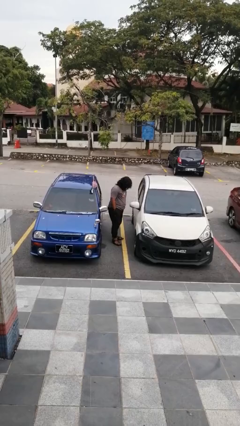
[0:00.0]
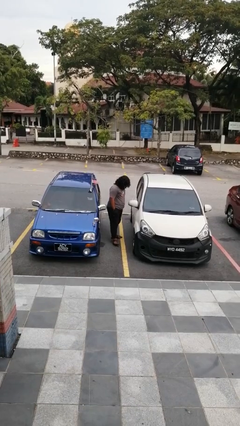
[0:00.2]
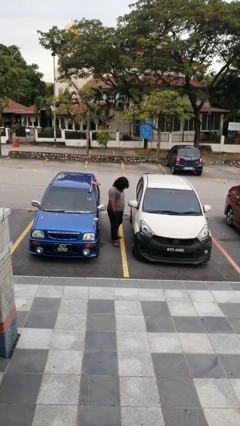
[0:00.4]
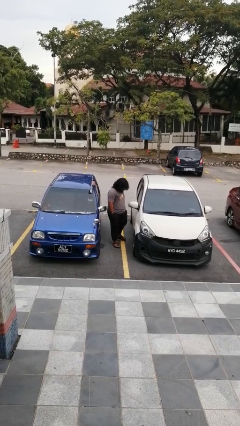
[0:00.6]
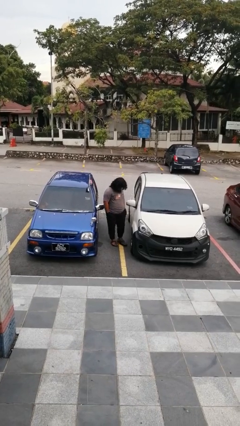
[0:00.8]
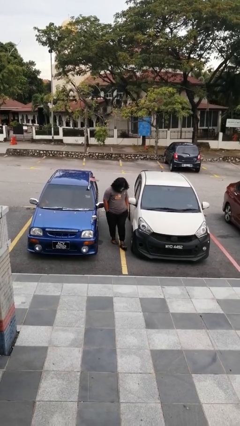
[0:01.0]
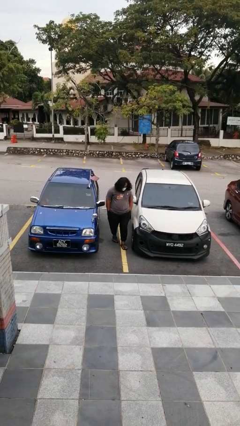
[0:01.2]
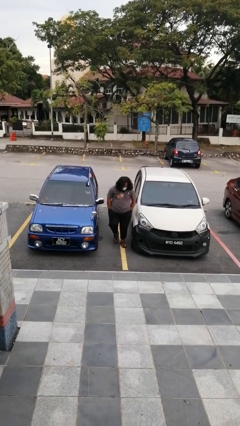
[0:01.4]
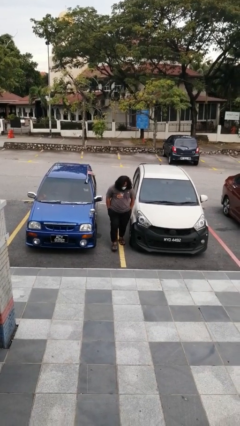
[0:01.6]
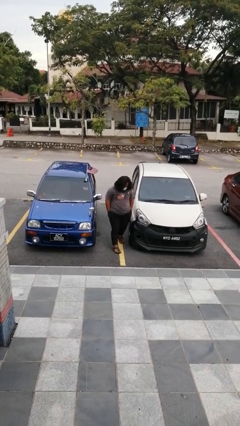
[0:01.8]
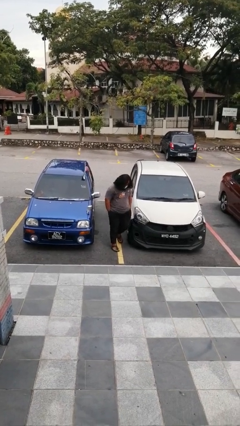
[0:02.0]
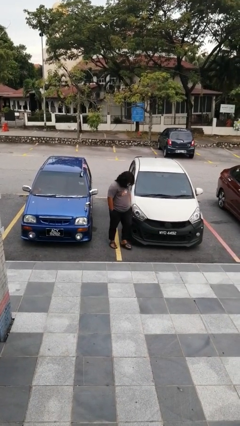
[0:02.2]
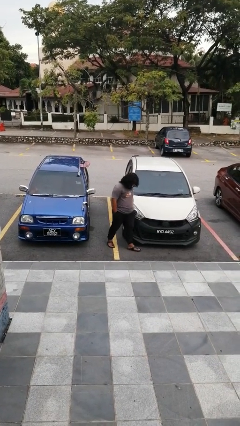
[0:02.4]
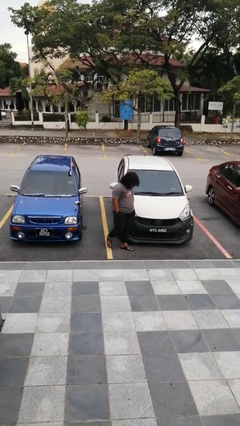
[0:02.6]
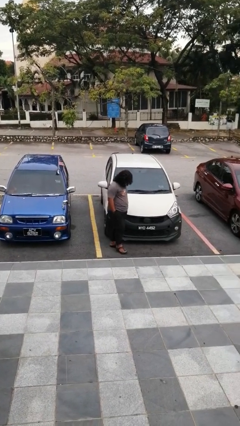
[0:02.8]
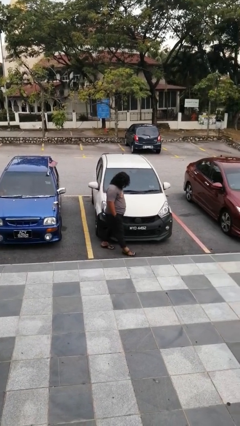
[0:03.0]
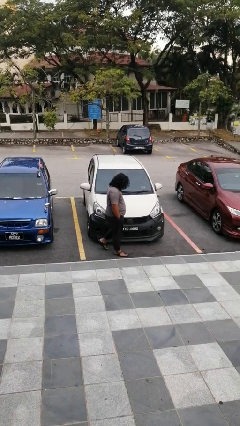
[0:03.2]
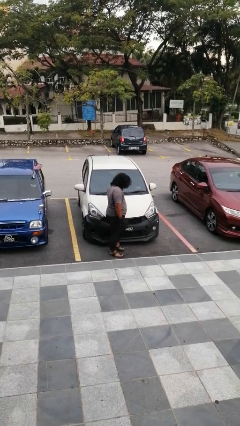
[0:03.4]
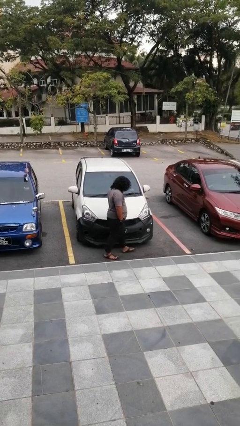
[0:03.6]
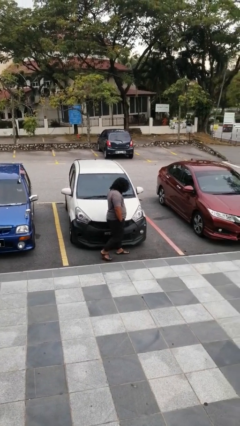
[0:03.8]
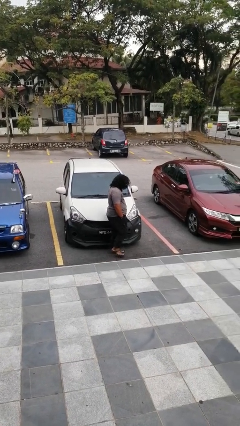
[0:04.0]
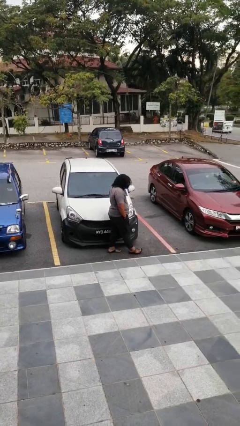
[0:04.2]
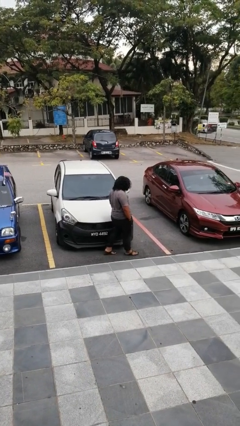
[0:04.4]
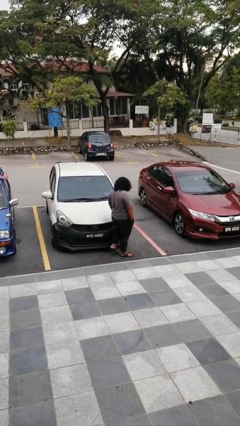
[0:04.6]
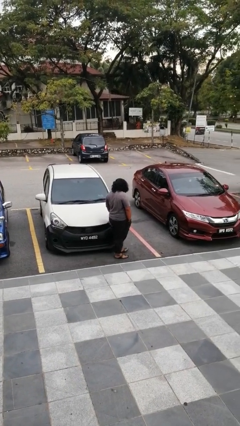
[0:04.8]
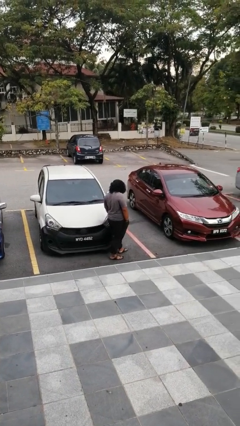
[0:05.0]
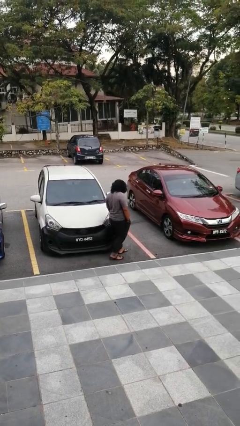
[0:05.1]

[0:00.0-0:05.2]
person walks around car

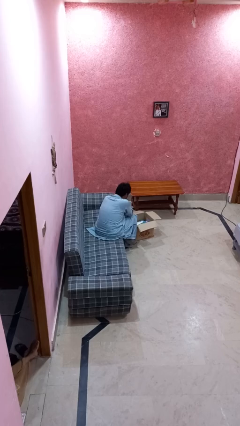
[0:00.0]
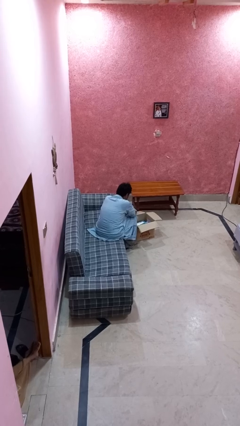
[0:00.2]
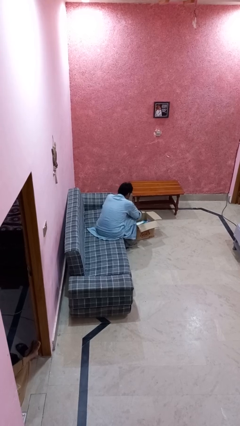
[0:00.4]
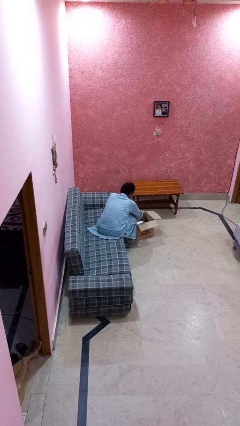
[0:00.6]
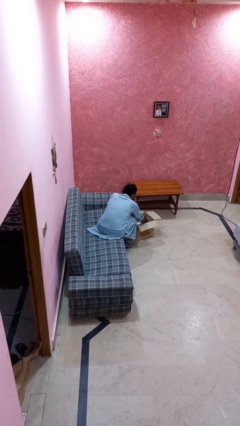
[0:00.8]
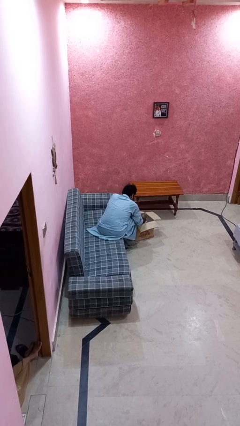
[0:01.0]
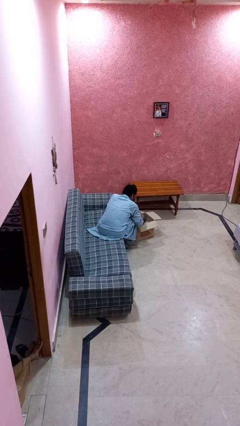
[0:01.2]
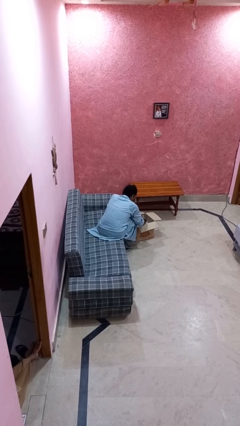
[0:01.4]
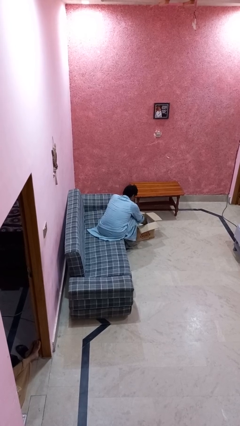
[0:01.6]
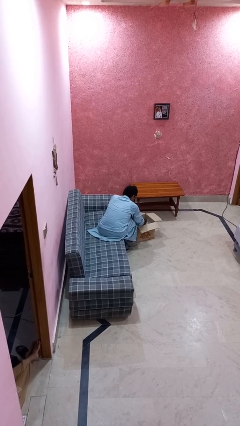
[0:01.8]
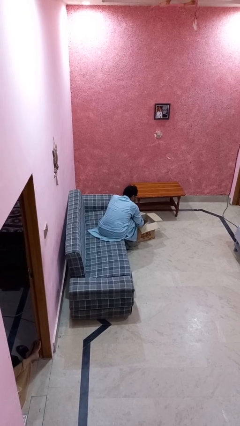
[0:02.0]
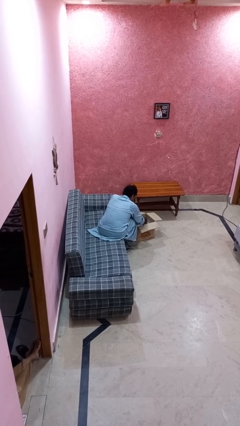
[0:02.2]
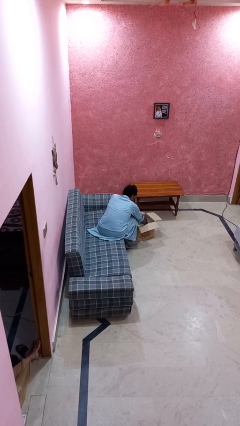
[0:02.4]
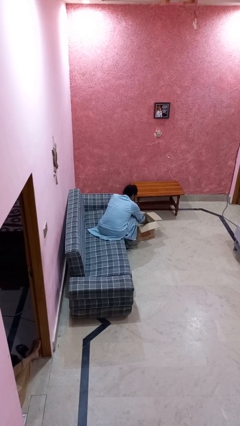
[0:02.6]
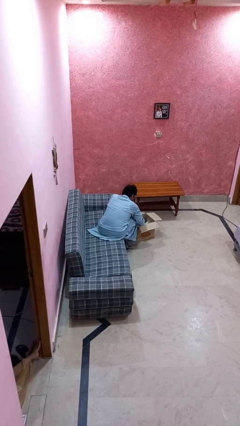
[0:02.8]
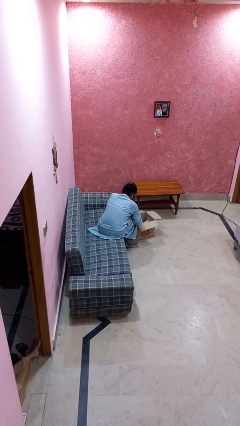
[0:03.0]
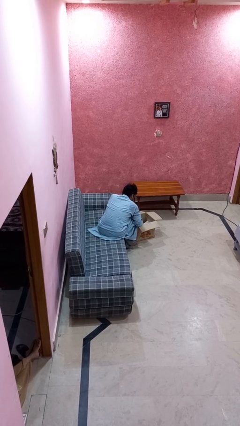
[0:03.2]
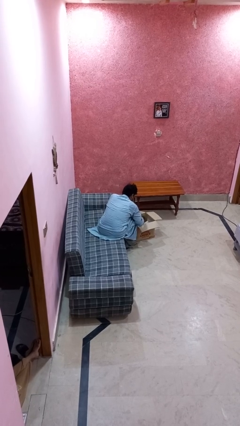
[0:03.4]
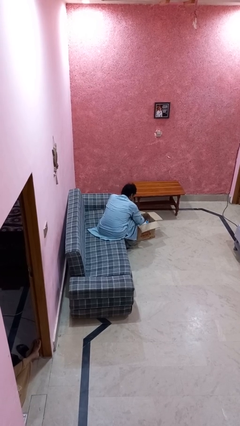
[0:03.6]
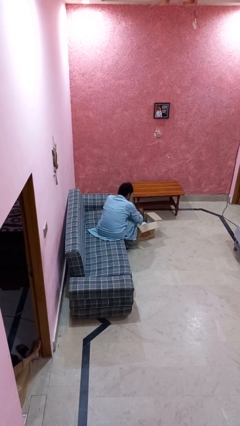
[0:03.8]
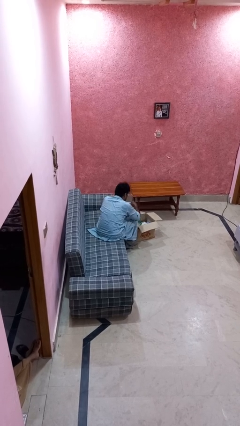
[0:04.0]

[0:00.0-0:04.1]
person searches in box

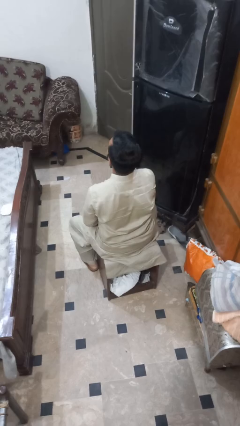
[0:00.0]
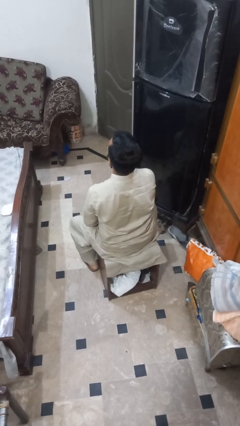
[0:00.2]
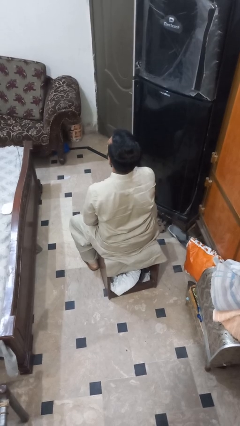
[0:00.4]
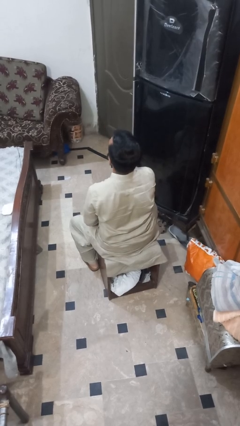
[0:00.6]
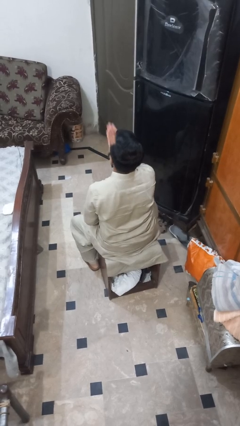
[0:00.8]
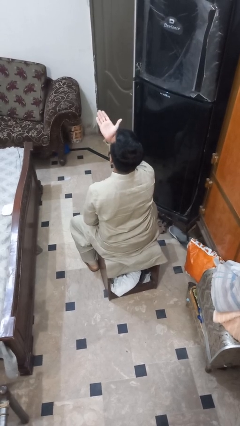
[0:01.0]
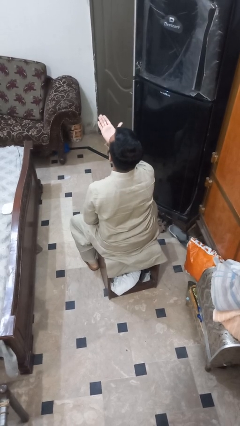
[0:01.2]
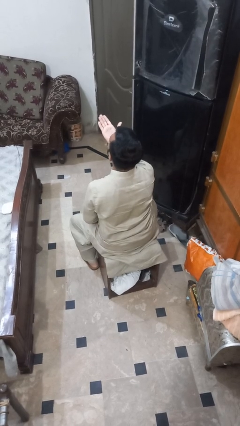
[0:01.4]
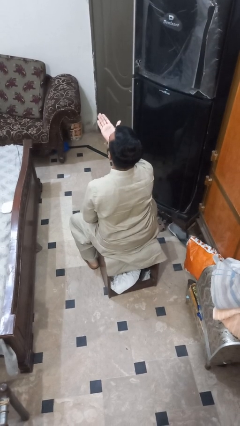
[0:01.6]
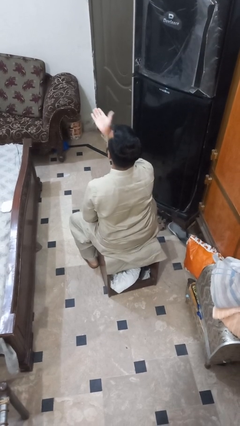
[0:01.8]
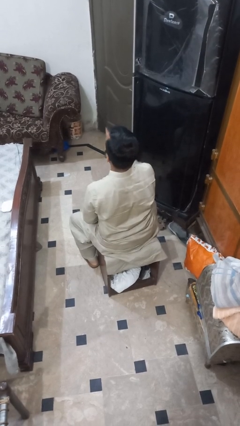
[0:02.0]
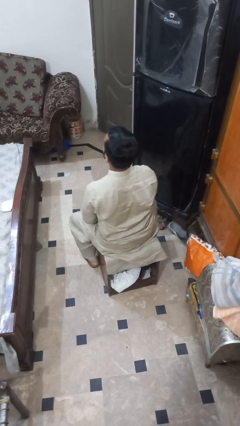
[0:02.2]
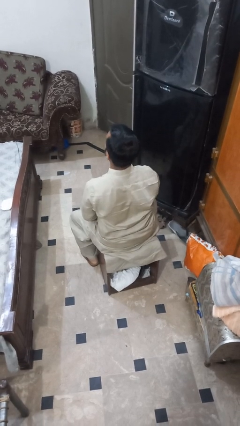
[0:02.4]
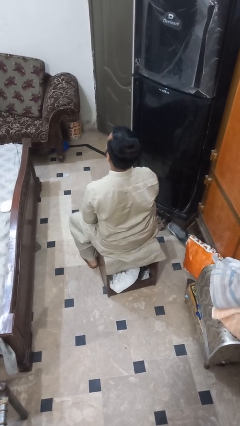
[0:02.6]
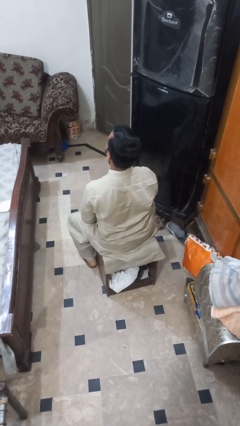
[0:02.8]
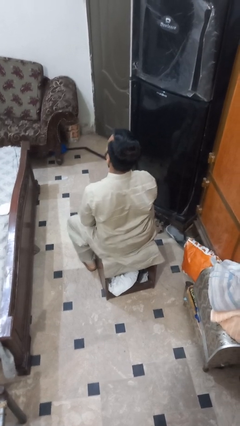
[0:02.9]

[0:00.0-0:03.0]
person gestures blow kiss

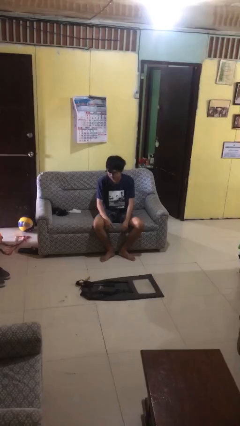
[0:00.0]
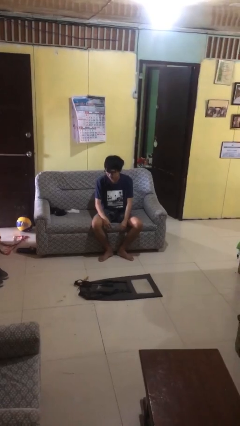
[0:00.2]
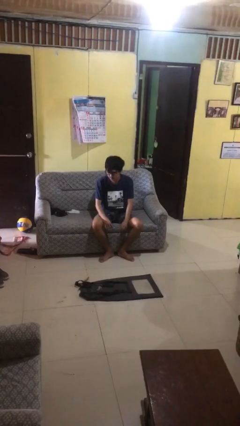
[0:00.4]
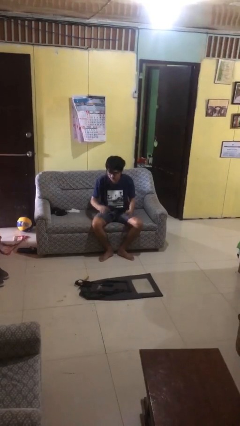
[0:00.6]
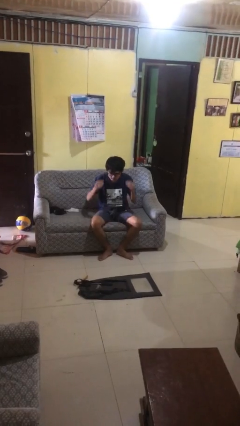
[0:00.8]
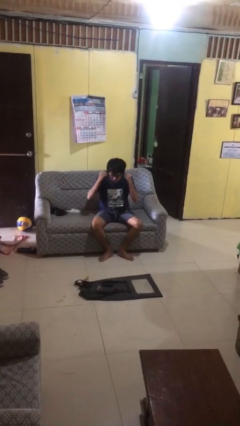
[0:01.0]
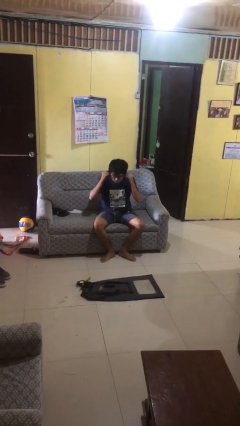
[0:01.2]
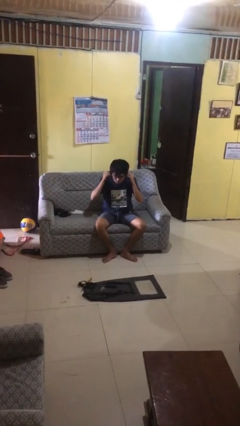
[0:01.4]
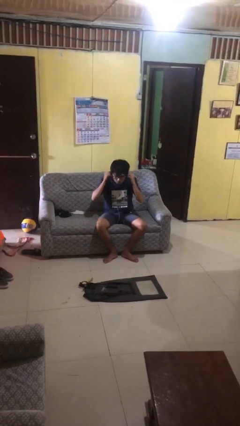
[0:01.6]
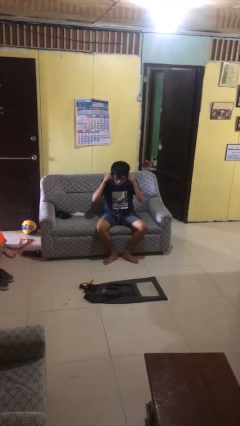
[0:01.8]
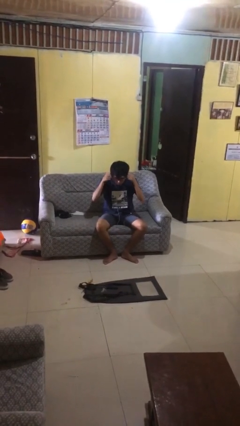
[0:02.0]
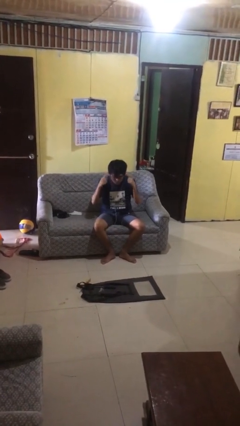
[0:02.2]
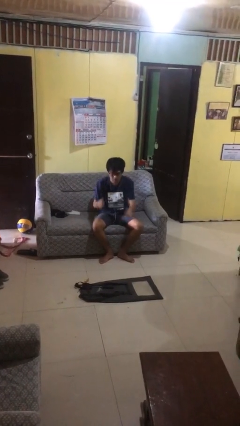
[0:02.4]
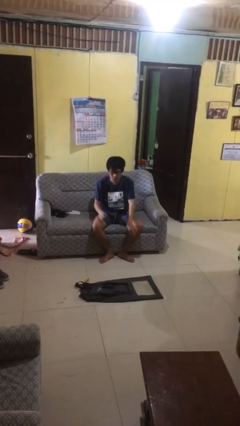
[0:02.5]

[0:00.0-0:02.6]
person puts on headphones

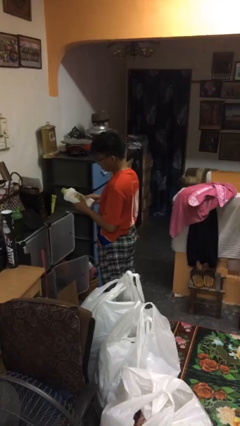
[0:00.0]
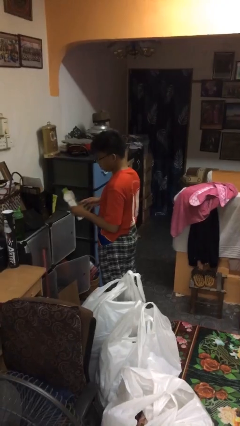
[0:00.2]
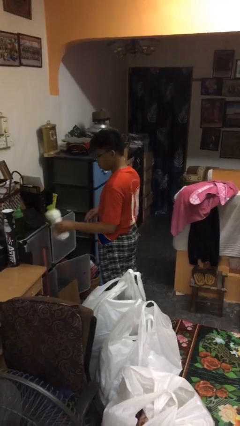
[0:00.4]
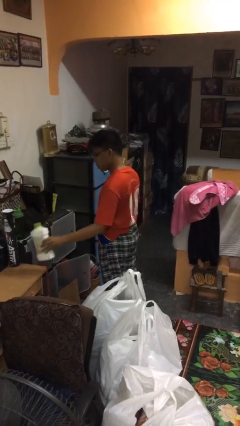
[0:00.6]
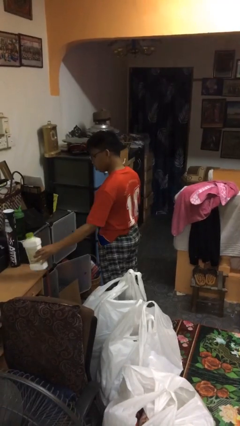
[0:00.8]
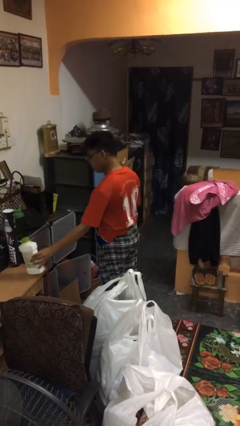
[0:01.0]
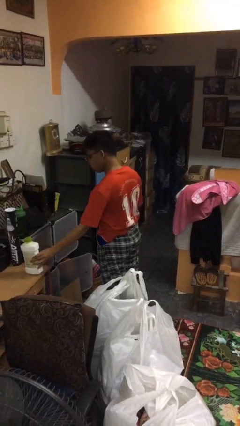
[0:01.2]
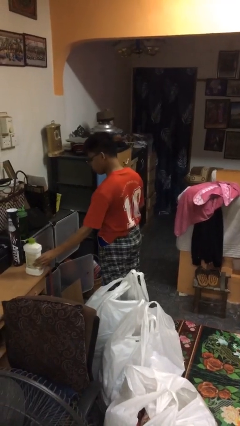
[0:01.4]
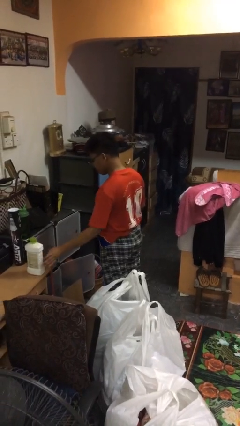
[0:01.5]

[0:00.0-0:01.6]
person puts down object on countertop

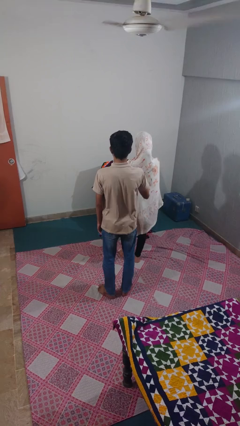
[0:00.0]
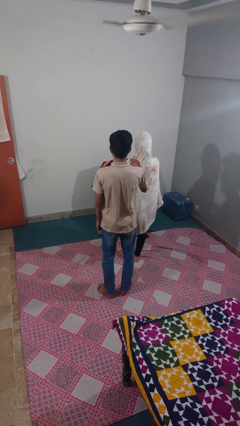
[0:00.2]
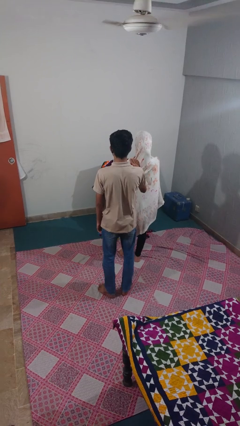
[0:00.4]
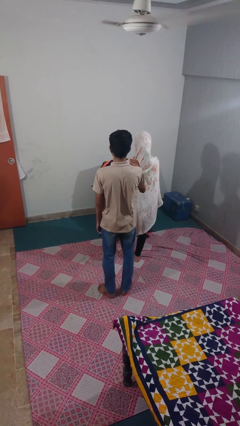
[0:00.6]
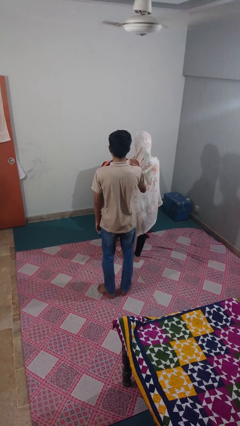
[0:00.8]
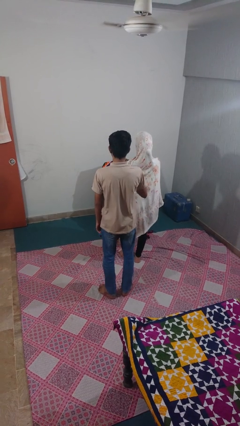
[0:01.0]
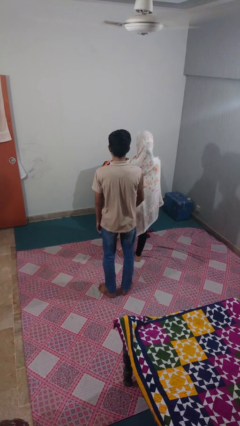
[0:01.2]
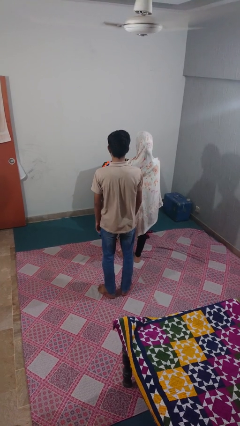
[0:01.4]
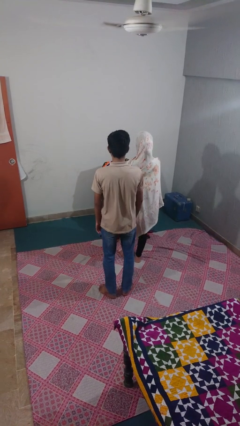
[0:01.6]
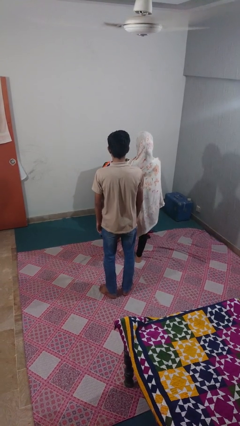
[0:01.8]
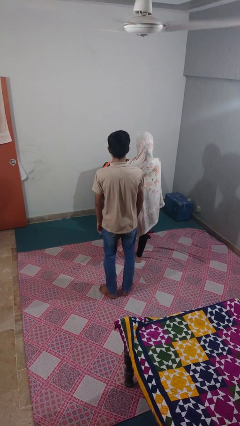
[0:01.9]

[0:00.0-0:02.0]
person touches back of person
